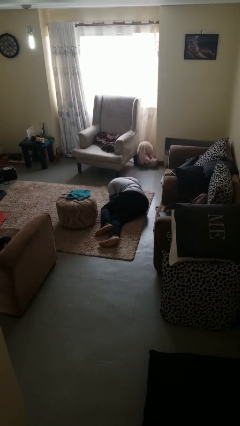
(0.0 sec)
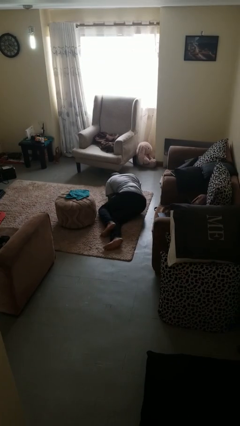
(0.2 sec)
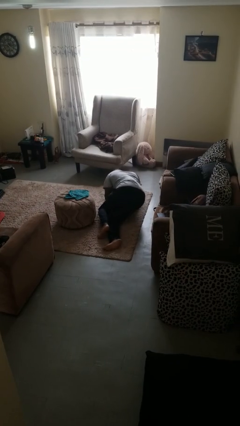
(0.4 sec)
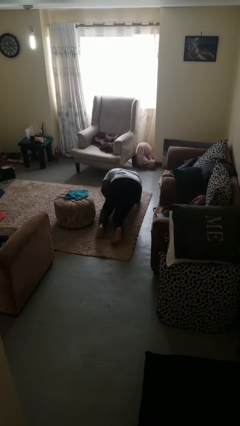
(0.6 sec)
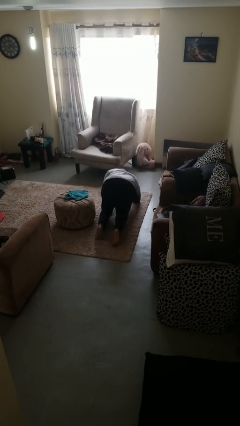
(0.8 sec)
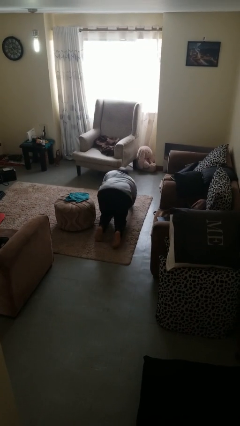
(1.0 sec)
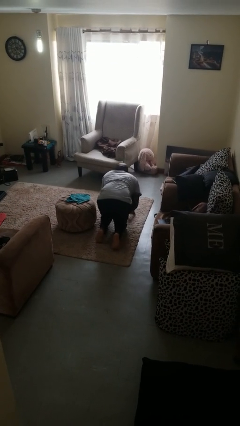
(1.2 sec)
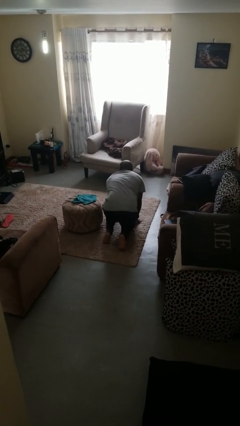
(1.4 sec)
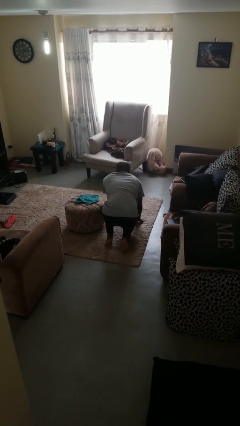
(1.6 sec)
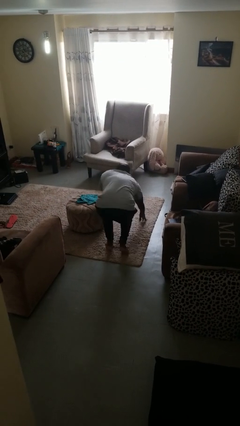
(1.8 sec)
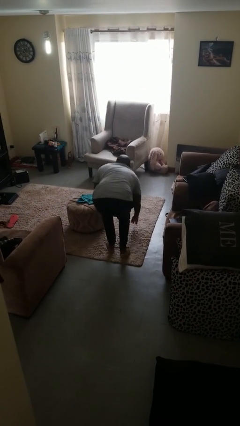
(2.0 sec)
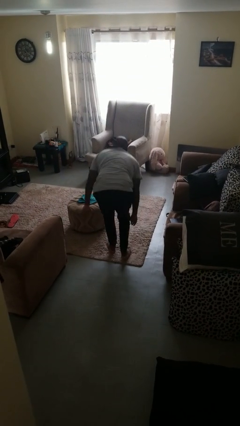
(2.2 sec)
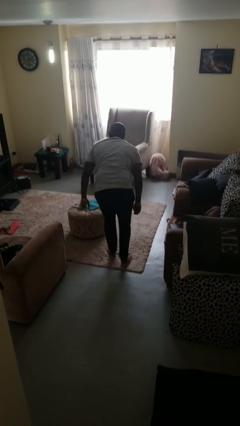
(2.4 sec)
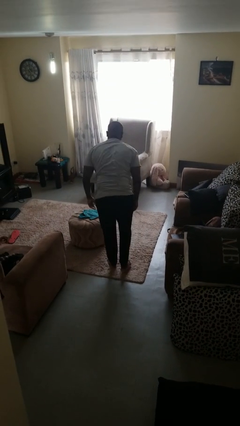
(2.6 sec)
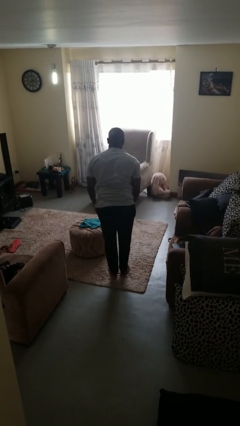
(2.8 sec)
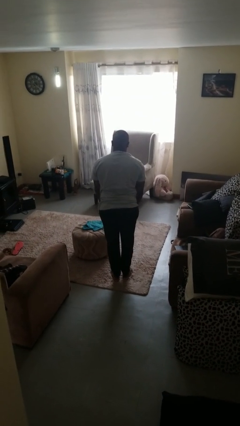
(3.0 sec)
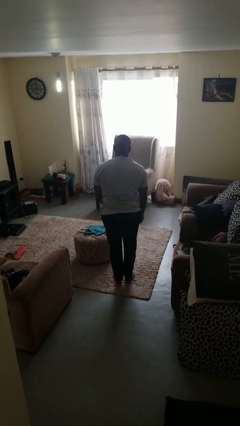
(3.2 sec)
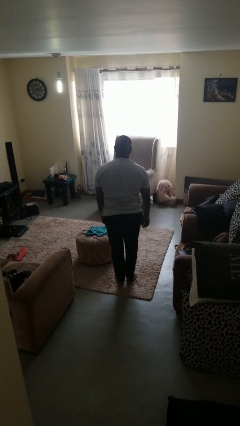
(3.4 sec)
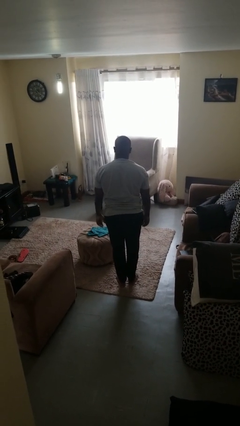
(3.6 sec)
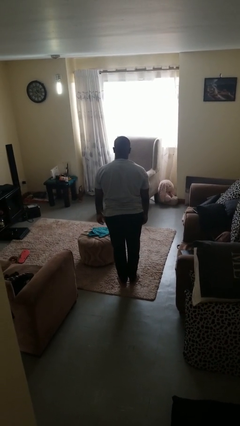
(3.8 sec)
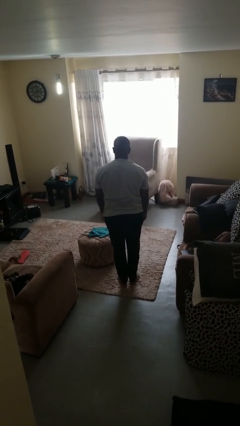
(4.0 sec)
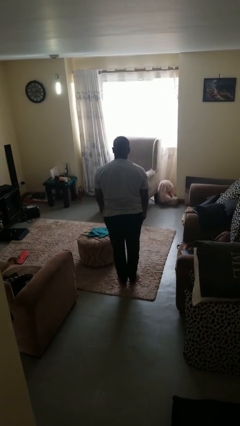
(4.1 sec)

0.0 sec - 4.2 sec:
person stands up from floor

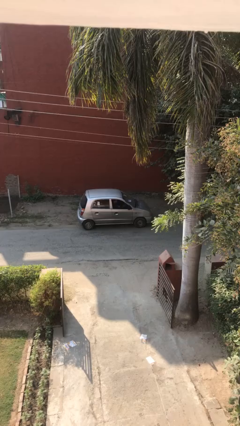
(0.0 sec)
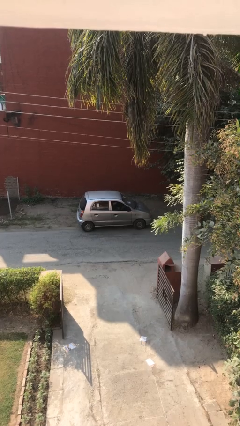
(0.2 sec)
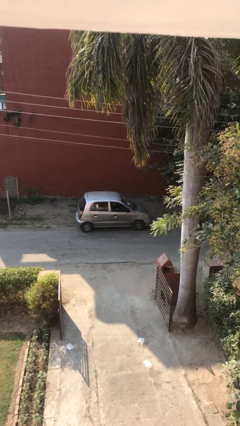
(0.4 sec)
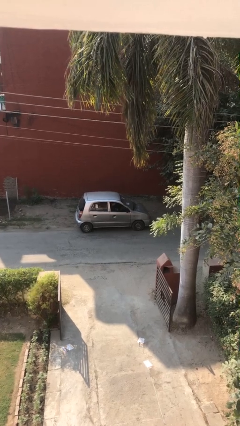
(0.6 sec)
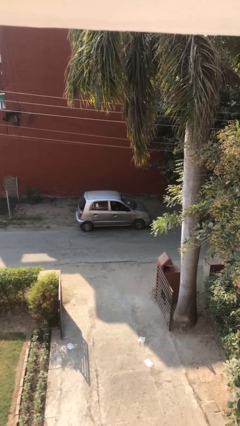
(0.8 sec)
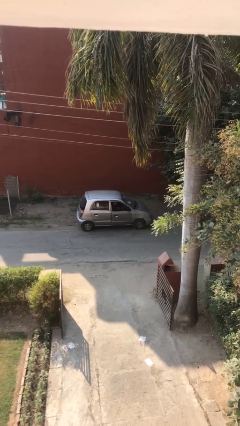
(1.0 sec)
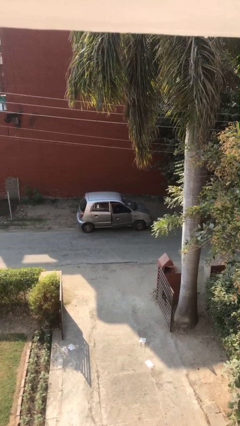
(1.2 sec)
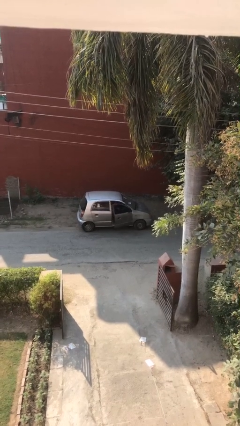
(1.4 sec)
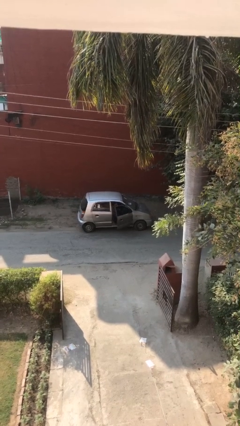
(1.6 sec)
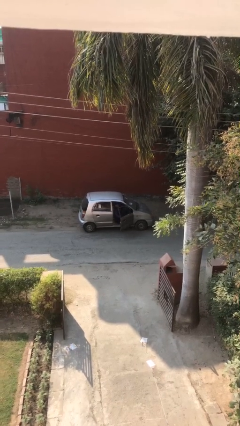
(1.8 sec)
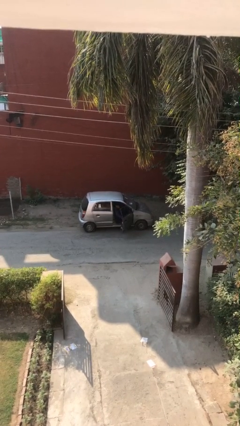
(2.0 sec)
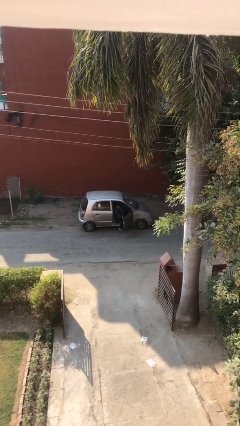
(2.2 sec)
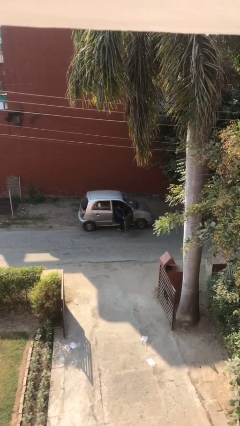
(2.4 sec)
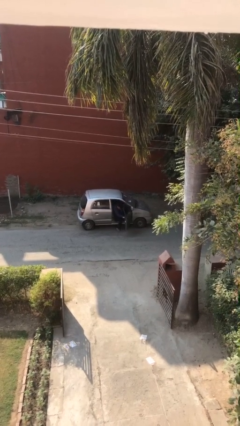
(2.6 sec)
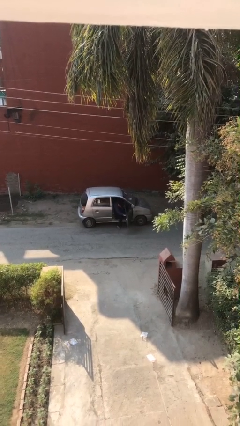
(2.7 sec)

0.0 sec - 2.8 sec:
person opens car door

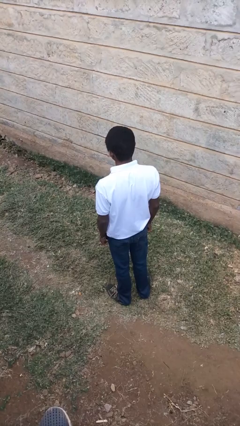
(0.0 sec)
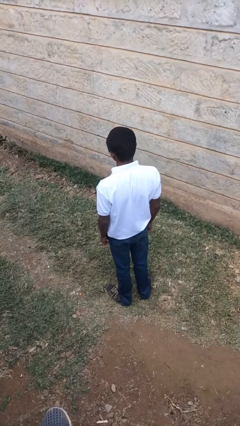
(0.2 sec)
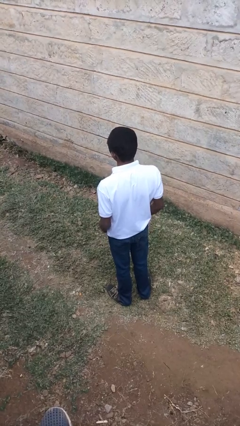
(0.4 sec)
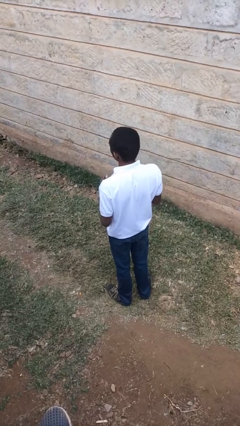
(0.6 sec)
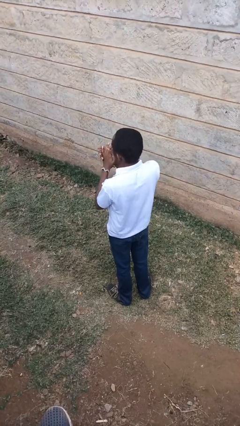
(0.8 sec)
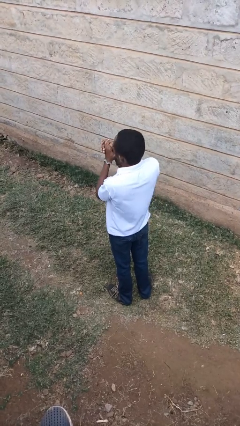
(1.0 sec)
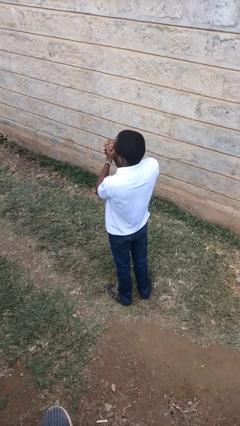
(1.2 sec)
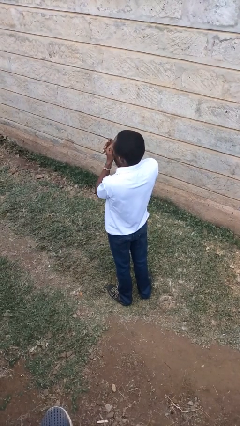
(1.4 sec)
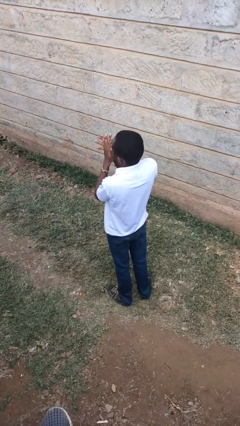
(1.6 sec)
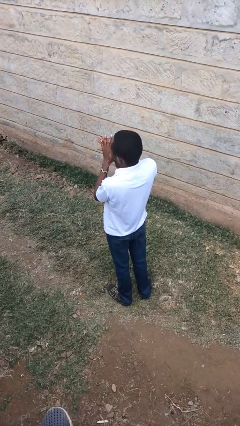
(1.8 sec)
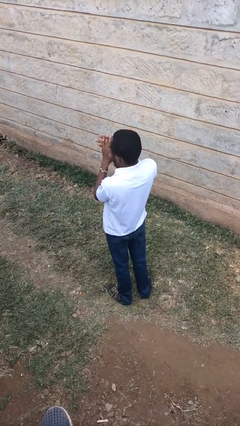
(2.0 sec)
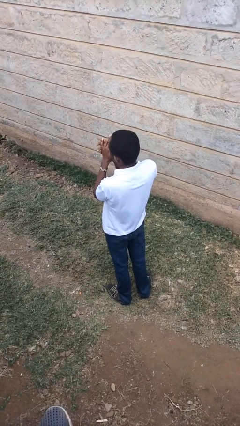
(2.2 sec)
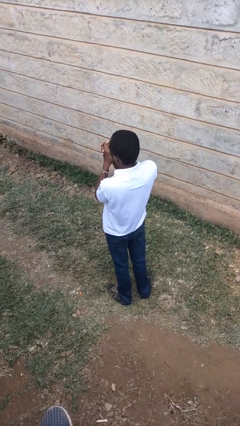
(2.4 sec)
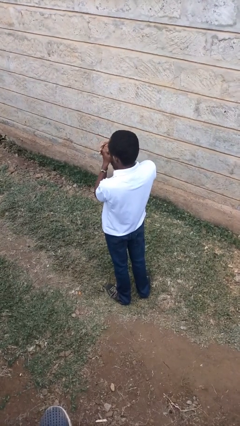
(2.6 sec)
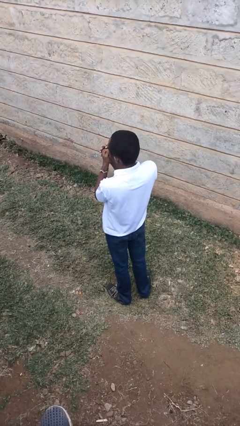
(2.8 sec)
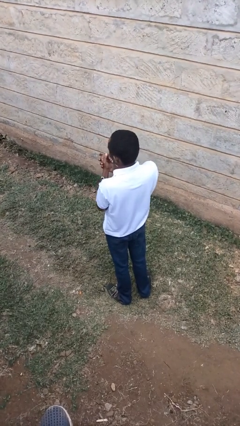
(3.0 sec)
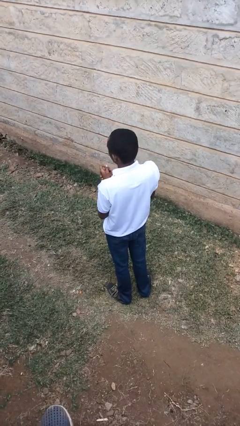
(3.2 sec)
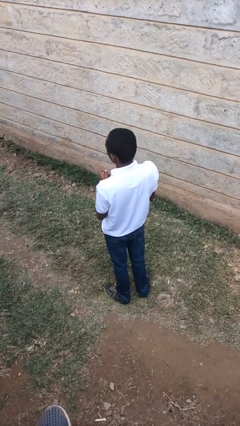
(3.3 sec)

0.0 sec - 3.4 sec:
person blows into hands

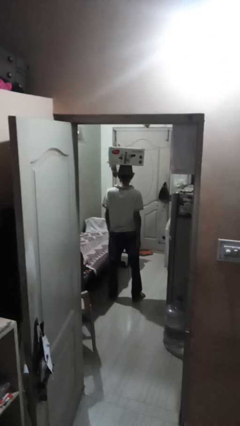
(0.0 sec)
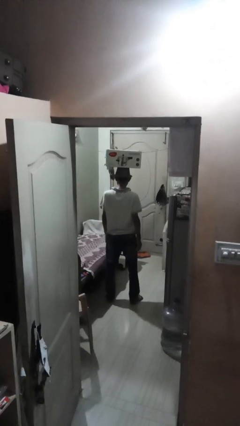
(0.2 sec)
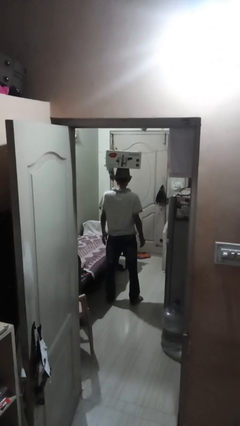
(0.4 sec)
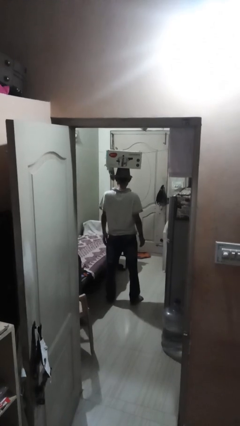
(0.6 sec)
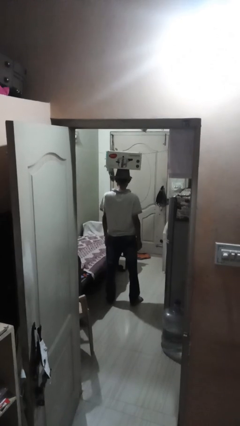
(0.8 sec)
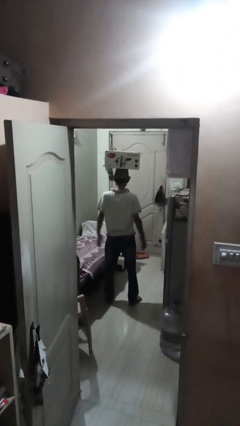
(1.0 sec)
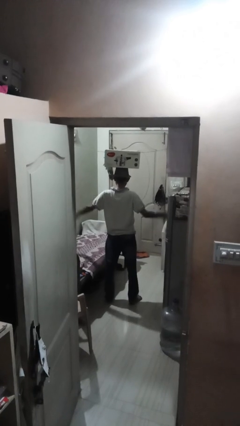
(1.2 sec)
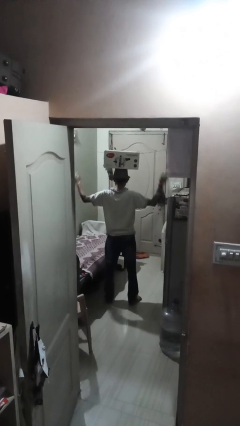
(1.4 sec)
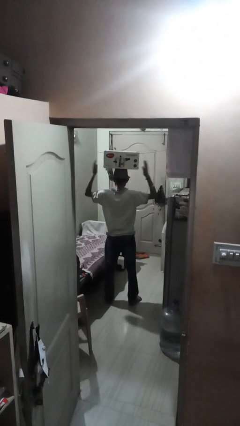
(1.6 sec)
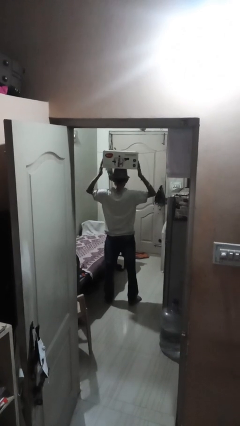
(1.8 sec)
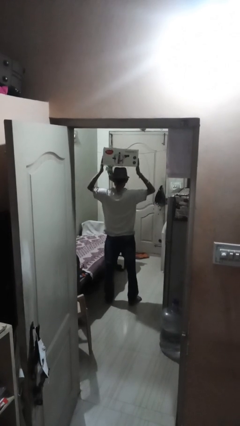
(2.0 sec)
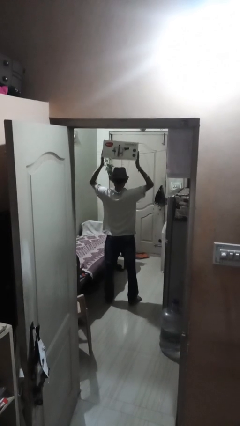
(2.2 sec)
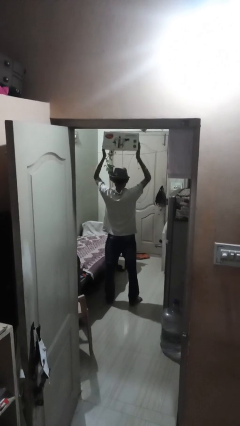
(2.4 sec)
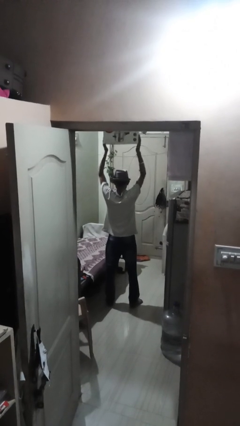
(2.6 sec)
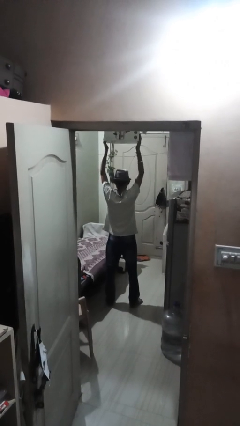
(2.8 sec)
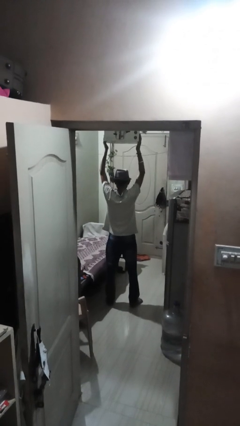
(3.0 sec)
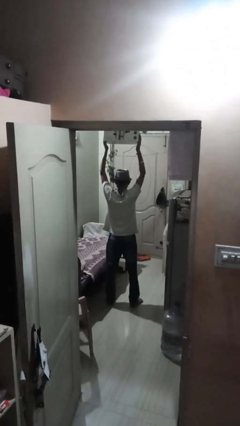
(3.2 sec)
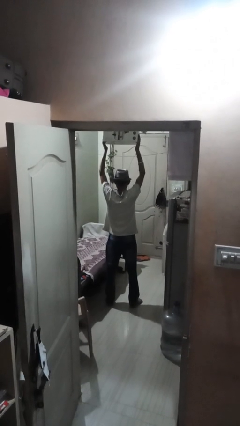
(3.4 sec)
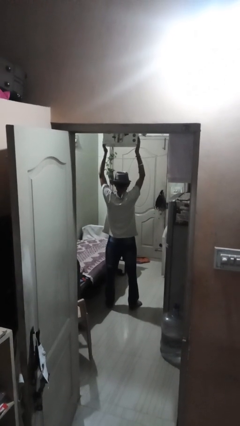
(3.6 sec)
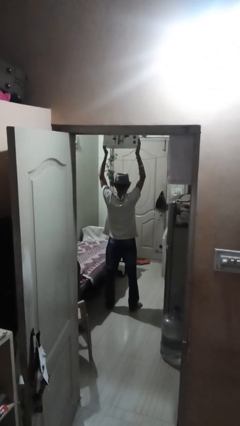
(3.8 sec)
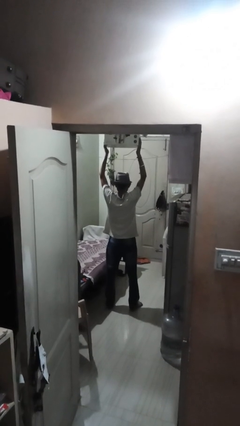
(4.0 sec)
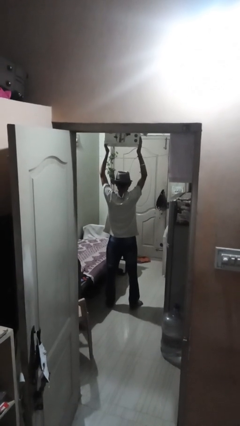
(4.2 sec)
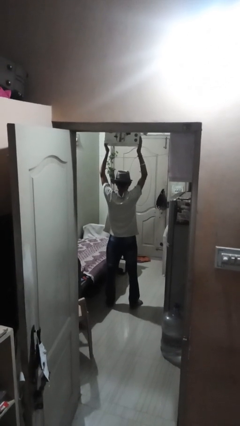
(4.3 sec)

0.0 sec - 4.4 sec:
person holds object above head

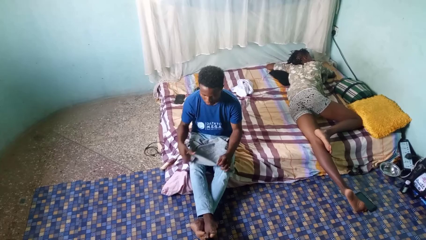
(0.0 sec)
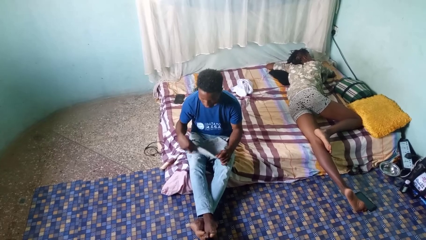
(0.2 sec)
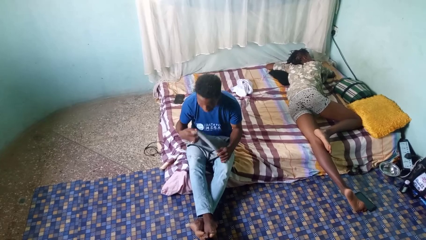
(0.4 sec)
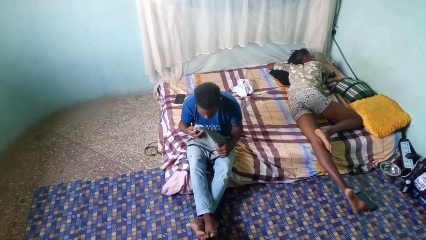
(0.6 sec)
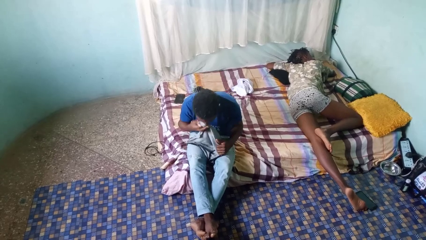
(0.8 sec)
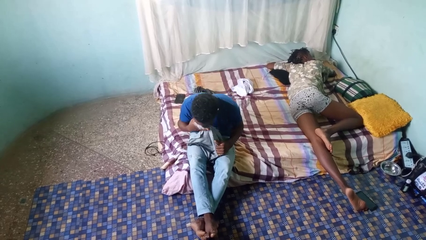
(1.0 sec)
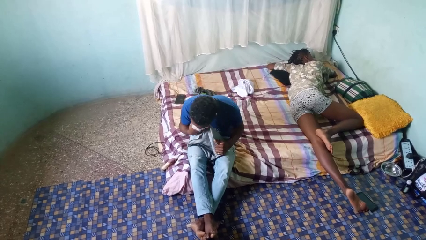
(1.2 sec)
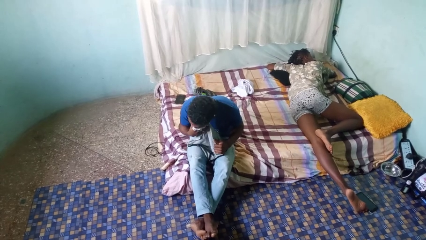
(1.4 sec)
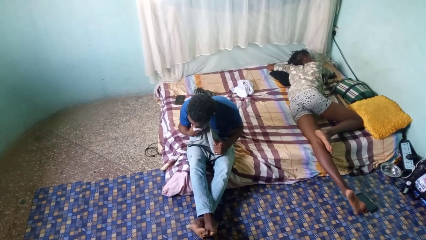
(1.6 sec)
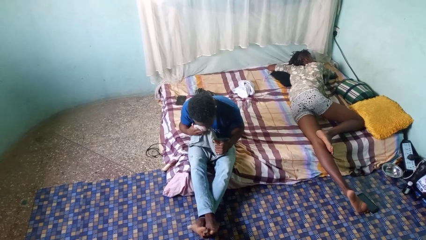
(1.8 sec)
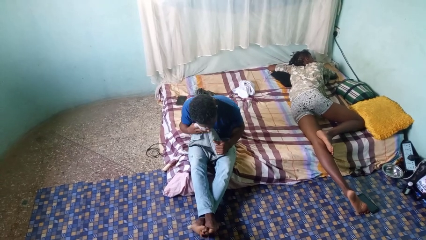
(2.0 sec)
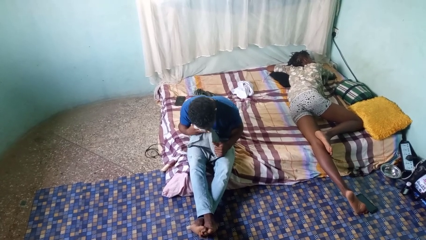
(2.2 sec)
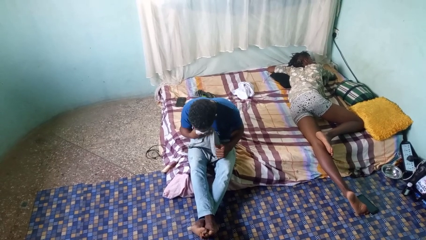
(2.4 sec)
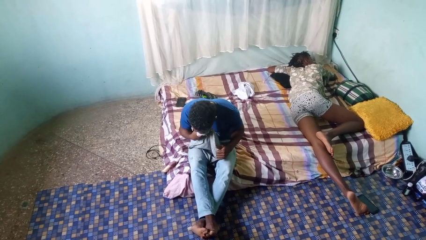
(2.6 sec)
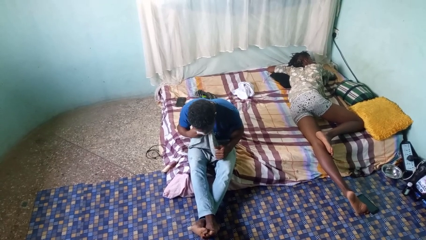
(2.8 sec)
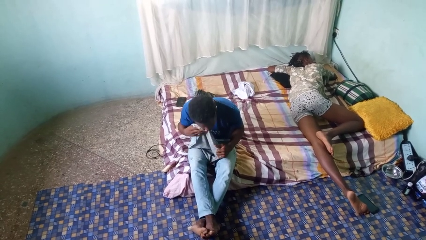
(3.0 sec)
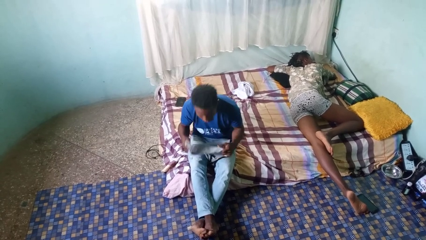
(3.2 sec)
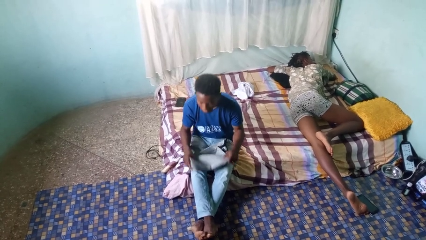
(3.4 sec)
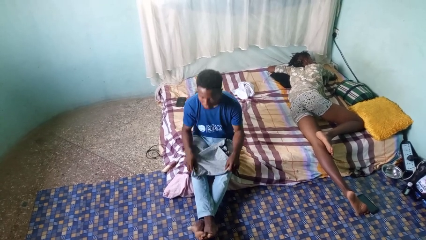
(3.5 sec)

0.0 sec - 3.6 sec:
person wipes mouth with napkin
